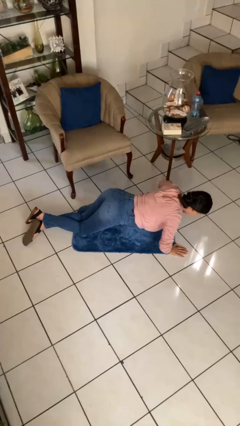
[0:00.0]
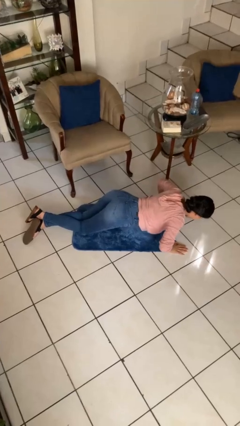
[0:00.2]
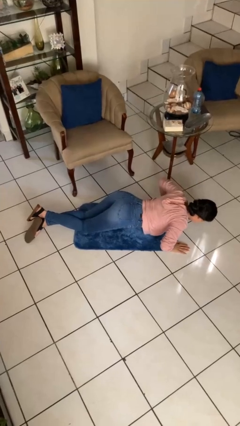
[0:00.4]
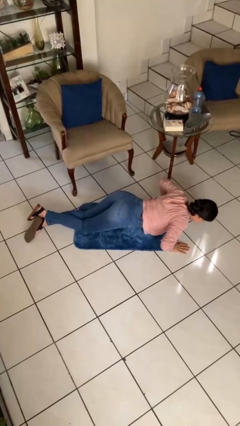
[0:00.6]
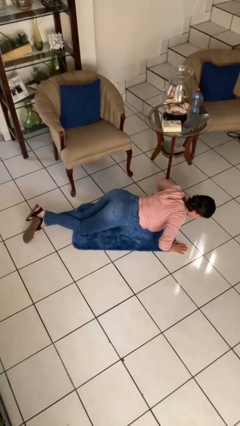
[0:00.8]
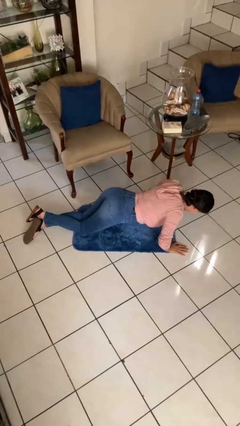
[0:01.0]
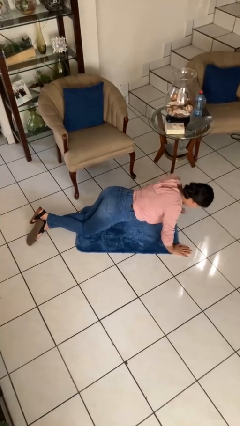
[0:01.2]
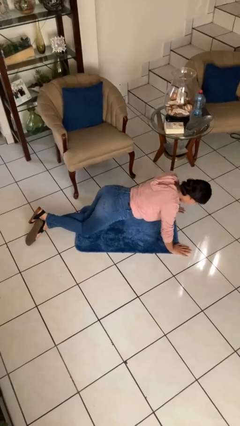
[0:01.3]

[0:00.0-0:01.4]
person exercises with pushup

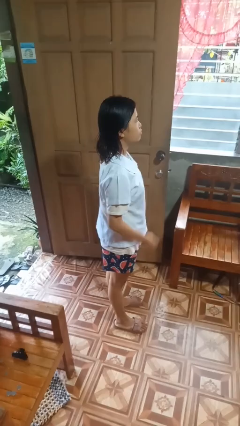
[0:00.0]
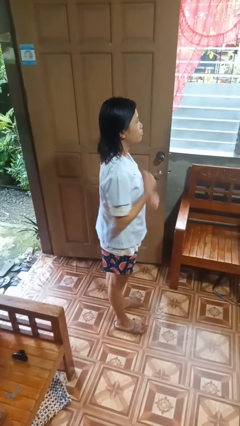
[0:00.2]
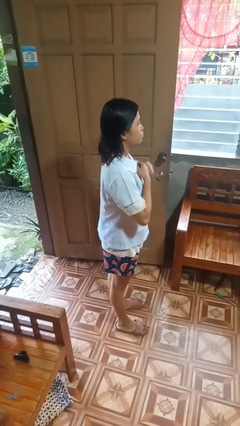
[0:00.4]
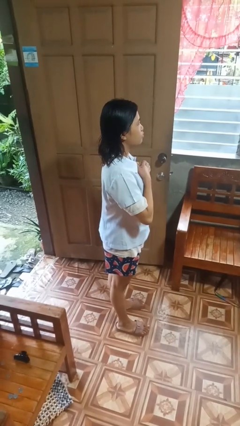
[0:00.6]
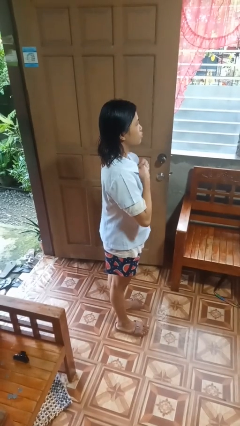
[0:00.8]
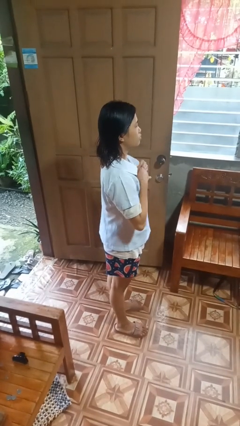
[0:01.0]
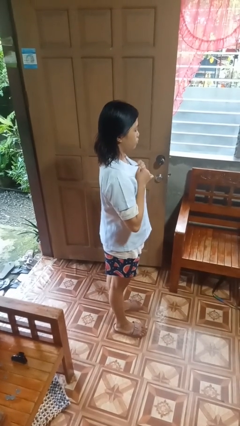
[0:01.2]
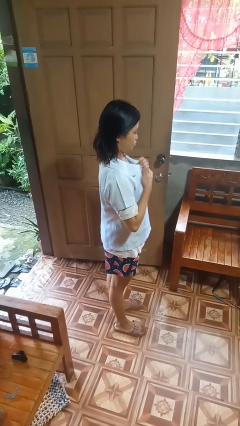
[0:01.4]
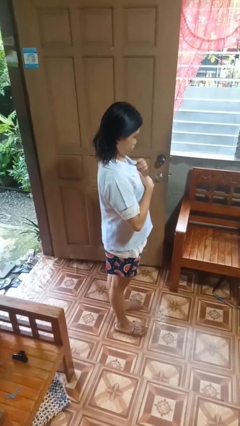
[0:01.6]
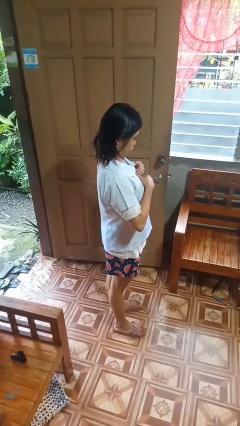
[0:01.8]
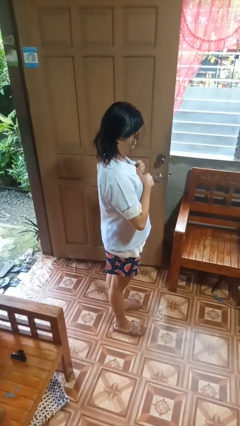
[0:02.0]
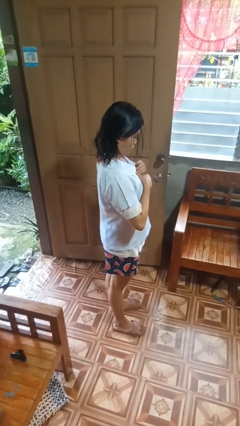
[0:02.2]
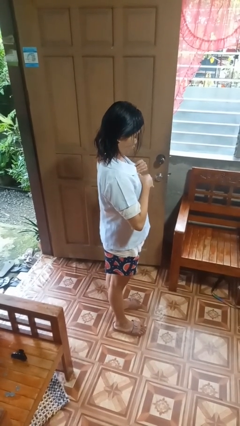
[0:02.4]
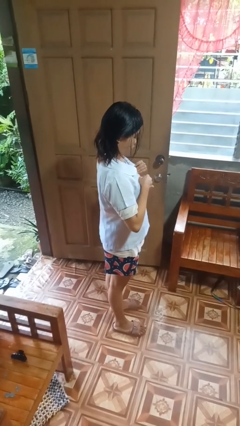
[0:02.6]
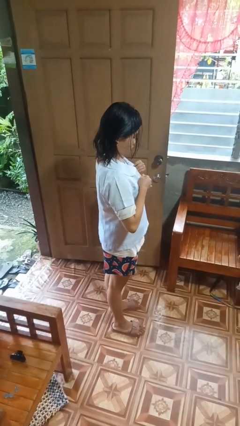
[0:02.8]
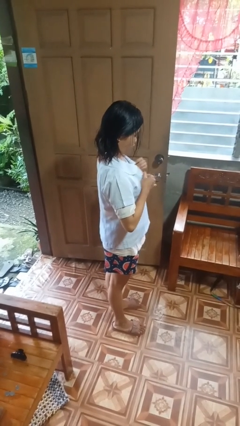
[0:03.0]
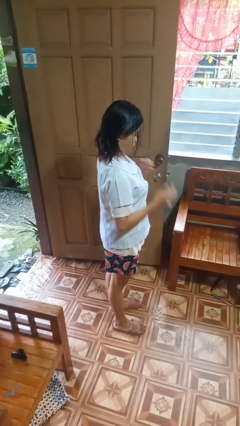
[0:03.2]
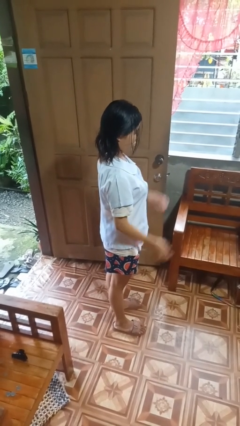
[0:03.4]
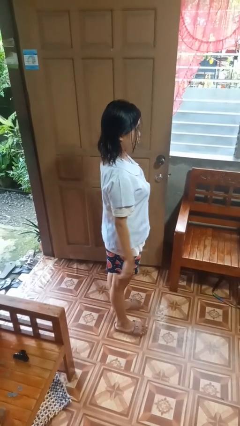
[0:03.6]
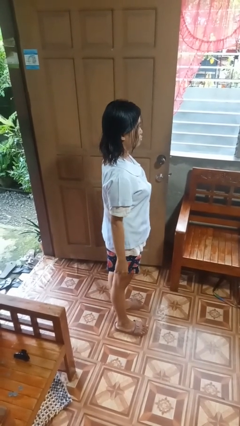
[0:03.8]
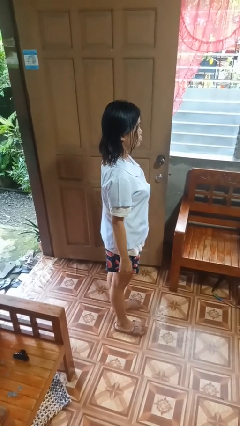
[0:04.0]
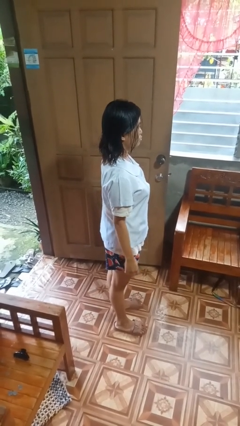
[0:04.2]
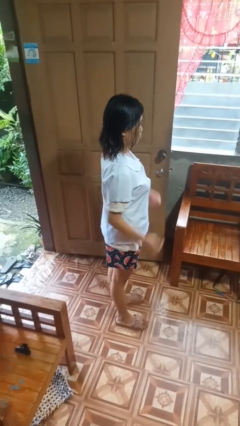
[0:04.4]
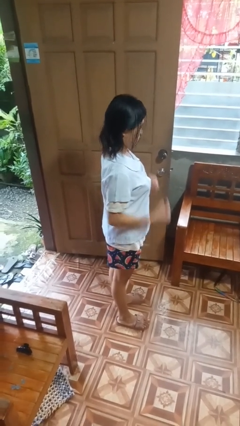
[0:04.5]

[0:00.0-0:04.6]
person unbuttons shirt

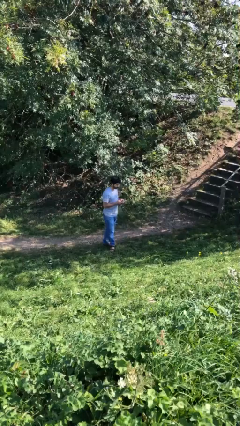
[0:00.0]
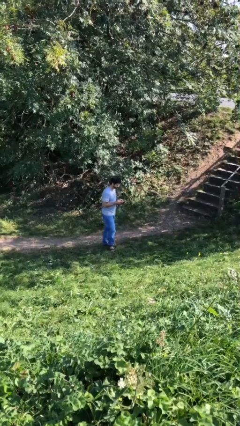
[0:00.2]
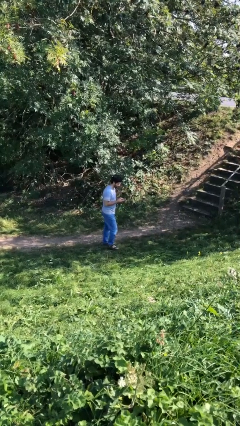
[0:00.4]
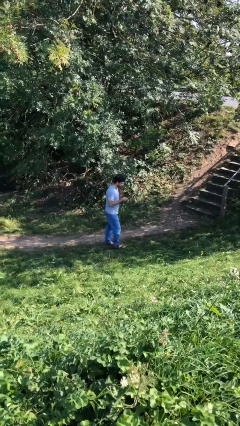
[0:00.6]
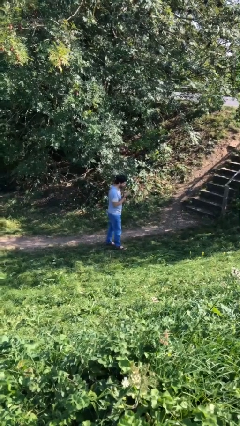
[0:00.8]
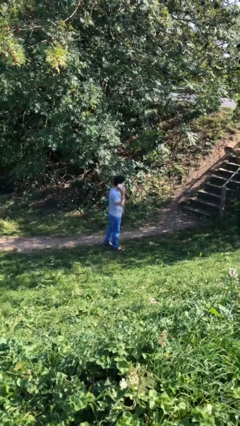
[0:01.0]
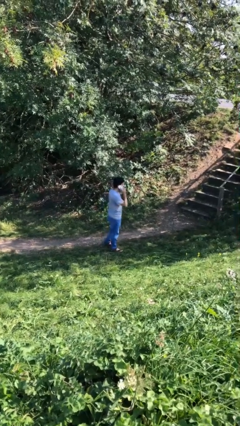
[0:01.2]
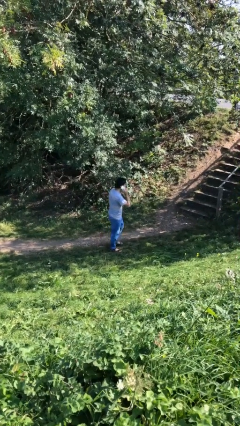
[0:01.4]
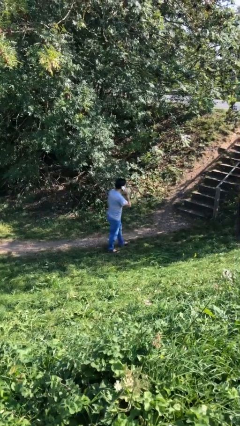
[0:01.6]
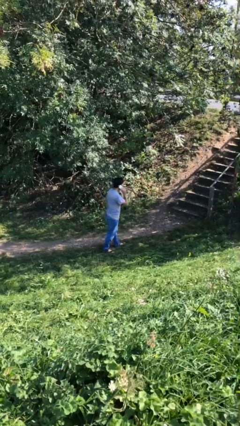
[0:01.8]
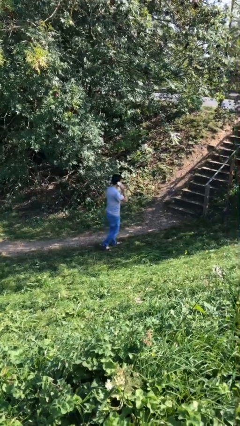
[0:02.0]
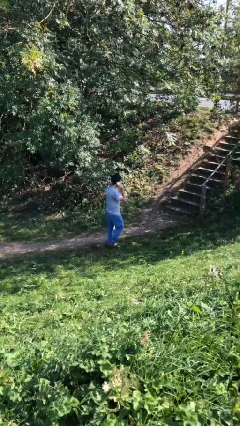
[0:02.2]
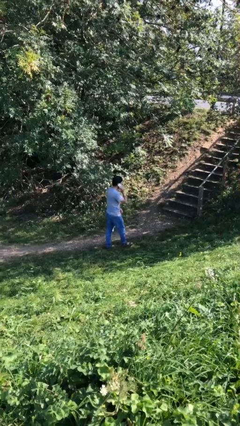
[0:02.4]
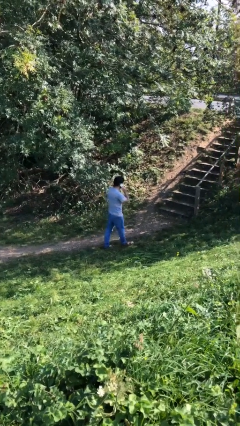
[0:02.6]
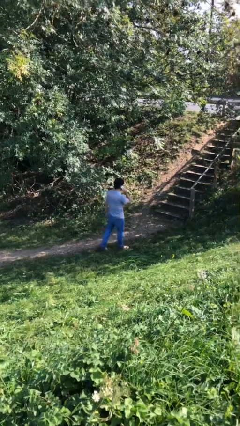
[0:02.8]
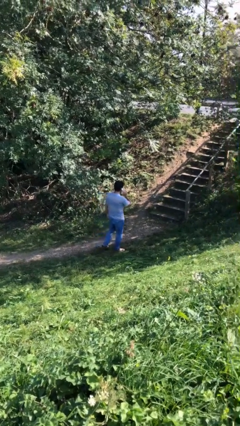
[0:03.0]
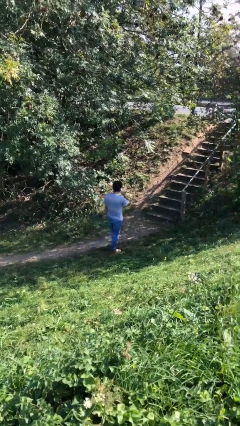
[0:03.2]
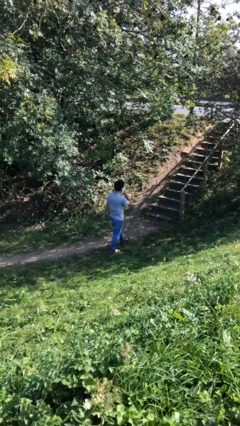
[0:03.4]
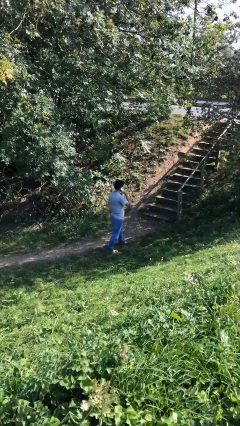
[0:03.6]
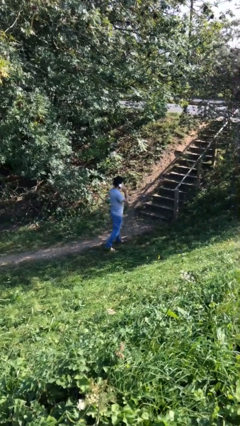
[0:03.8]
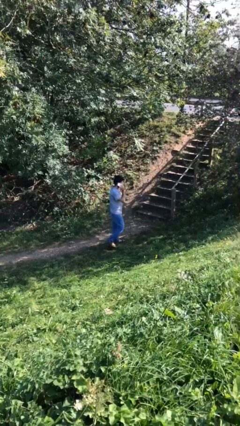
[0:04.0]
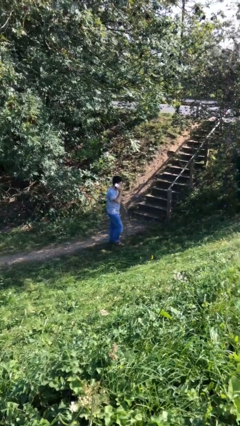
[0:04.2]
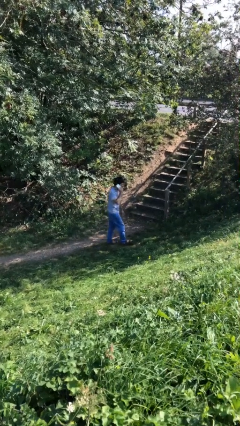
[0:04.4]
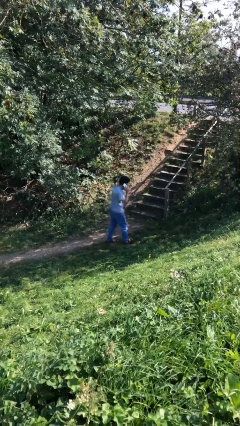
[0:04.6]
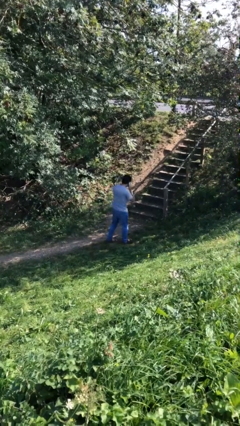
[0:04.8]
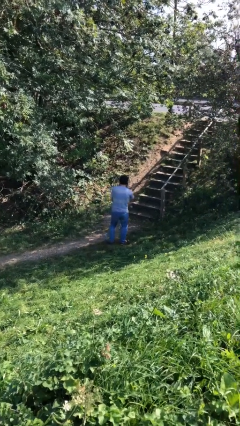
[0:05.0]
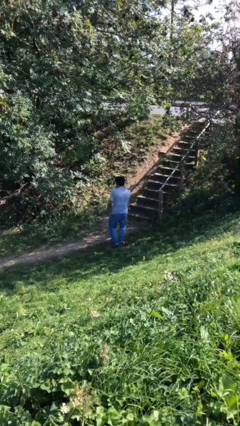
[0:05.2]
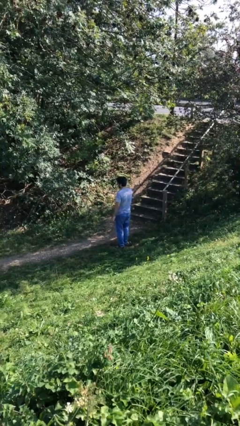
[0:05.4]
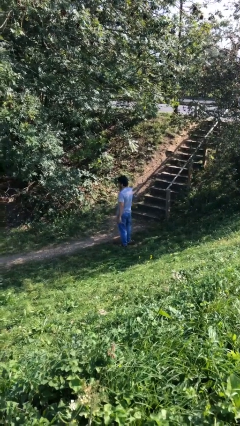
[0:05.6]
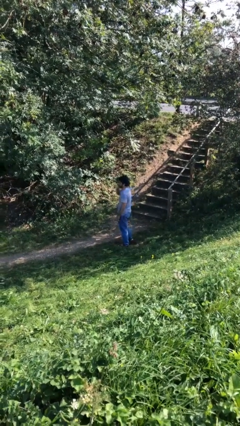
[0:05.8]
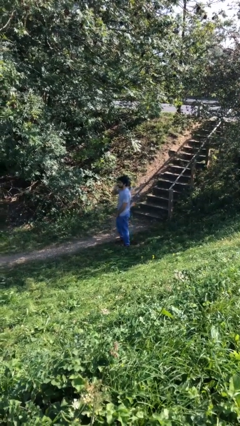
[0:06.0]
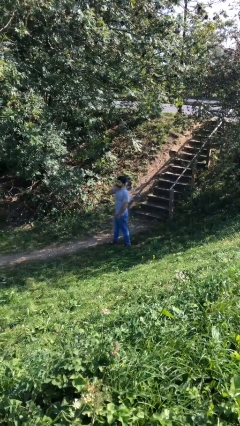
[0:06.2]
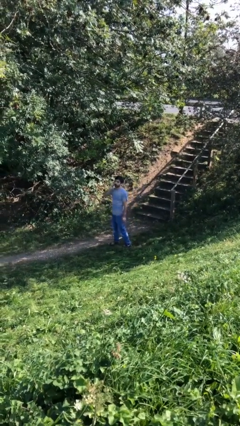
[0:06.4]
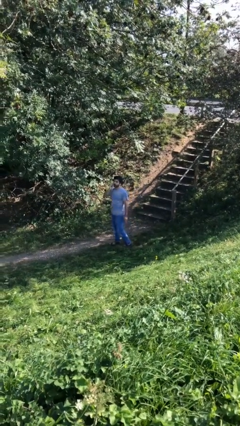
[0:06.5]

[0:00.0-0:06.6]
person talks on phone

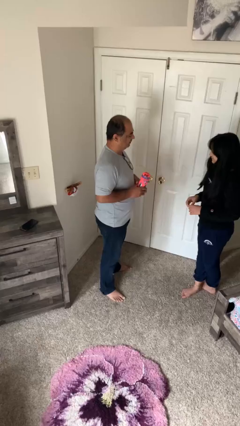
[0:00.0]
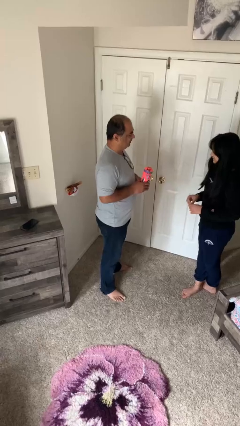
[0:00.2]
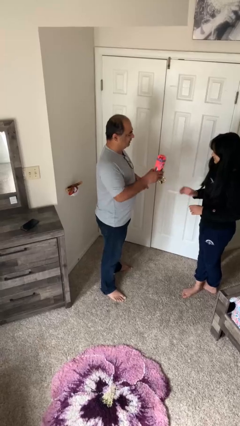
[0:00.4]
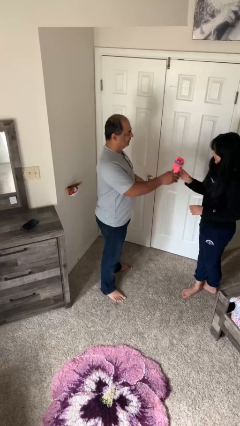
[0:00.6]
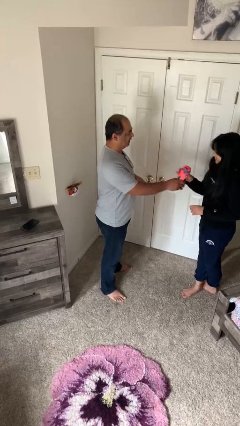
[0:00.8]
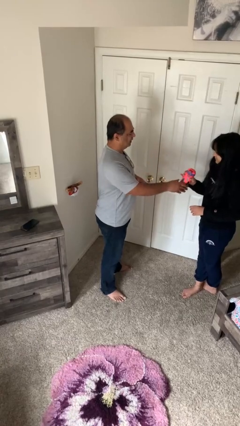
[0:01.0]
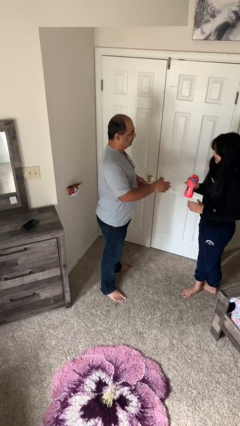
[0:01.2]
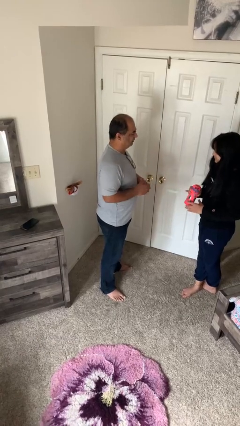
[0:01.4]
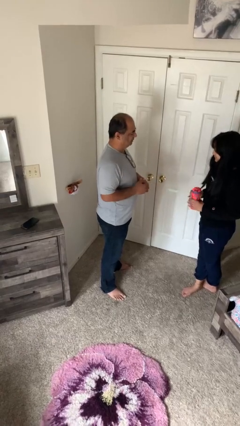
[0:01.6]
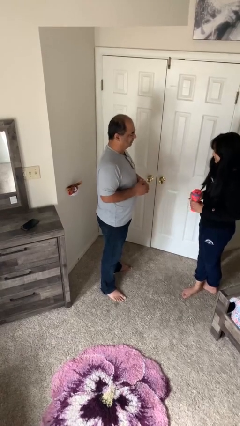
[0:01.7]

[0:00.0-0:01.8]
person transfers object to person

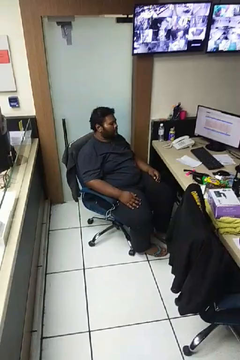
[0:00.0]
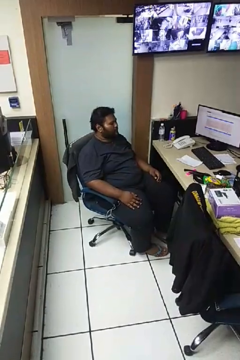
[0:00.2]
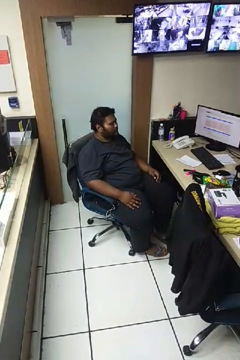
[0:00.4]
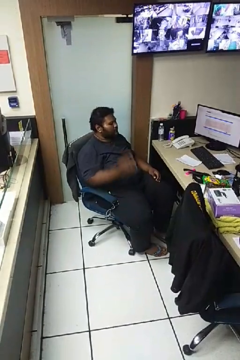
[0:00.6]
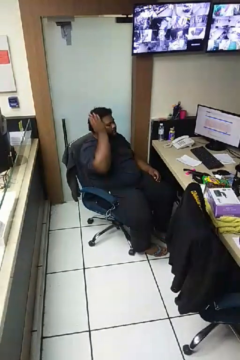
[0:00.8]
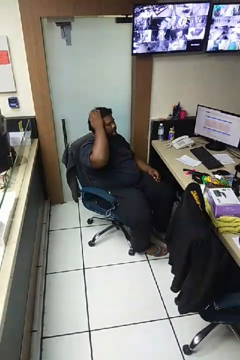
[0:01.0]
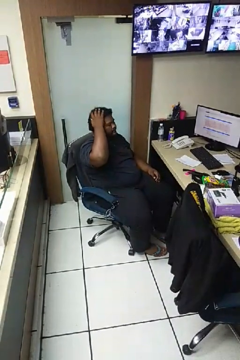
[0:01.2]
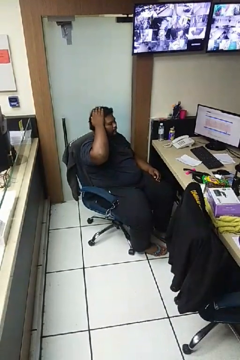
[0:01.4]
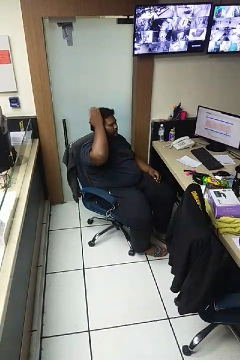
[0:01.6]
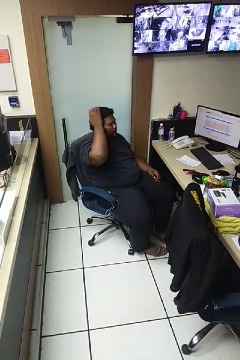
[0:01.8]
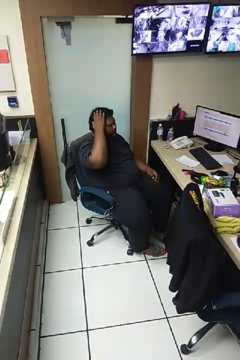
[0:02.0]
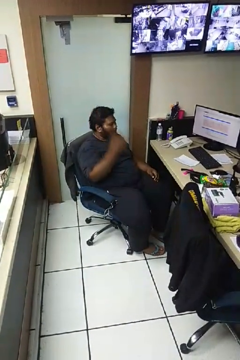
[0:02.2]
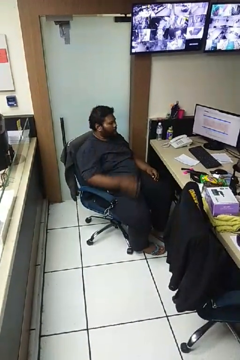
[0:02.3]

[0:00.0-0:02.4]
person pats head

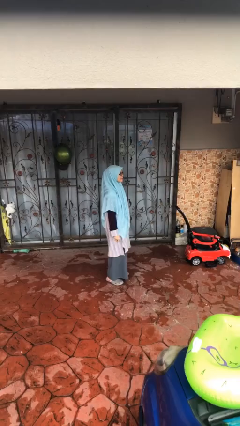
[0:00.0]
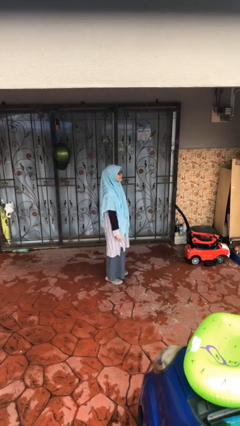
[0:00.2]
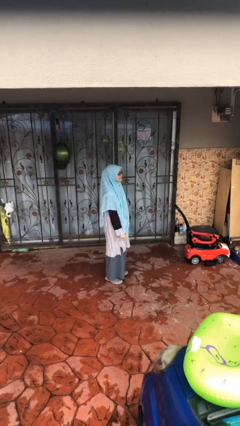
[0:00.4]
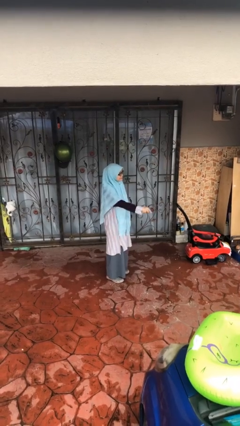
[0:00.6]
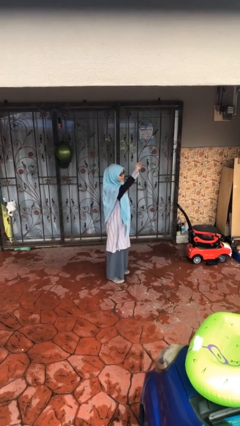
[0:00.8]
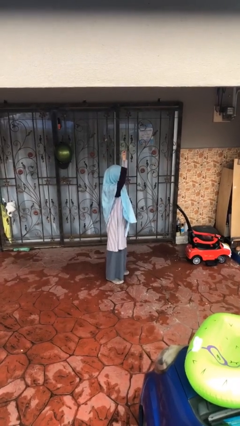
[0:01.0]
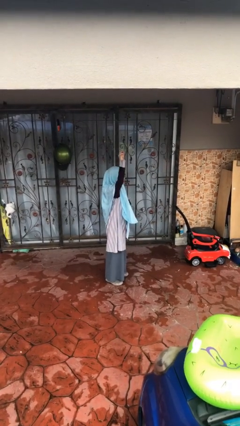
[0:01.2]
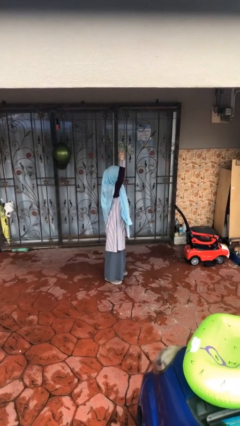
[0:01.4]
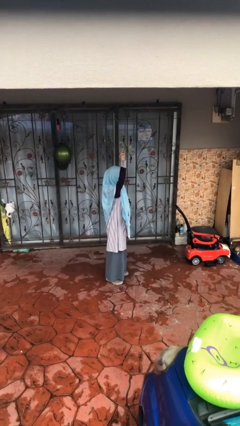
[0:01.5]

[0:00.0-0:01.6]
person gestures raise hand
